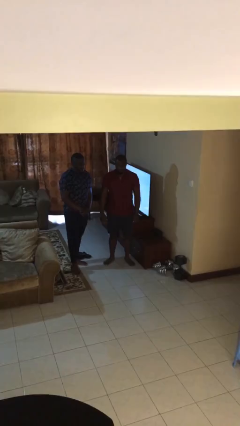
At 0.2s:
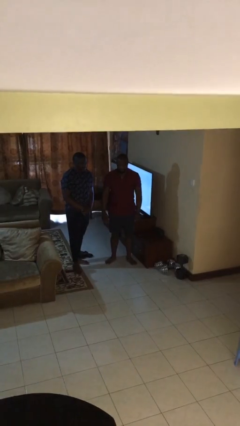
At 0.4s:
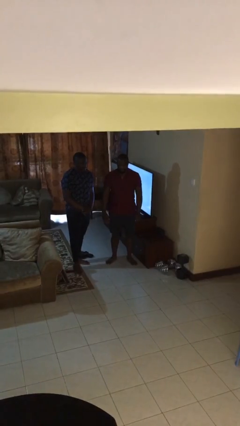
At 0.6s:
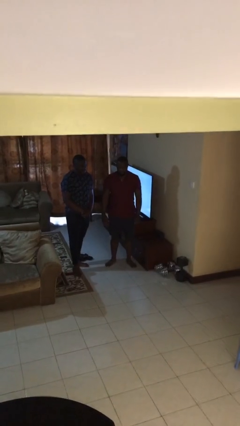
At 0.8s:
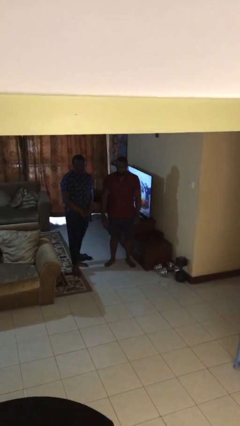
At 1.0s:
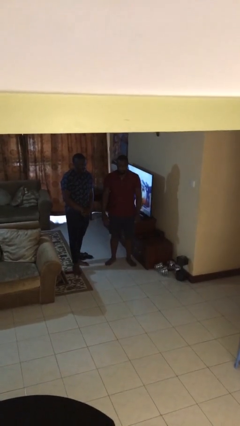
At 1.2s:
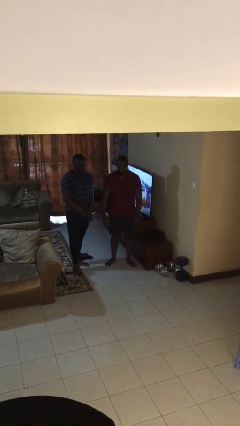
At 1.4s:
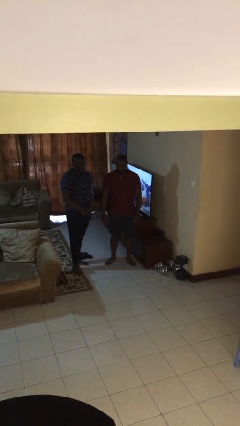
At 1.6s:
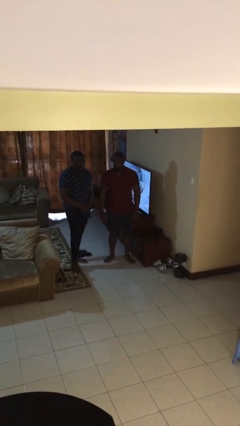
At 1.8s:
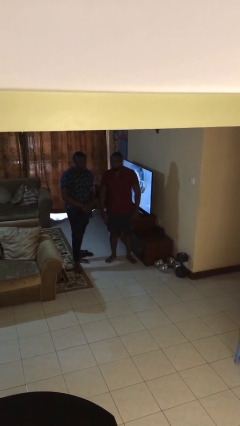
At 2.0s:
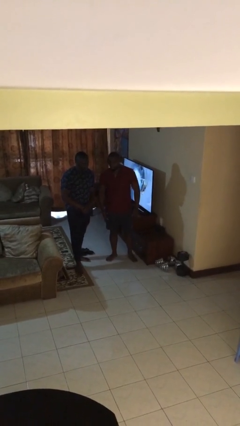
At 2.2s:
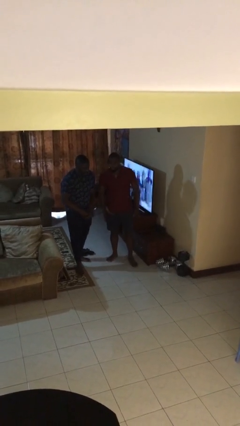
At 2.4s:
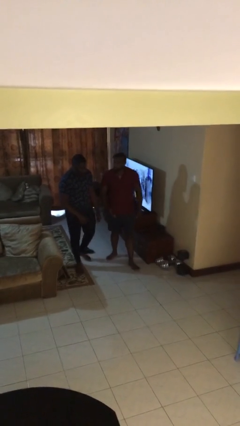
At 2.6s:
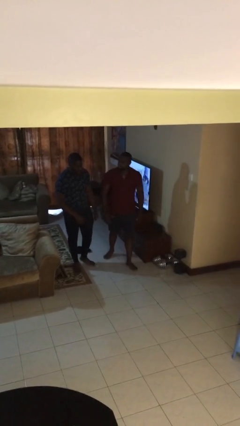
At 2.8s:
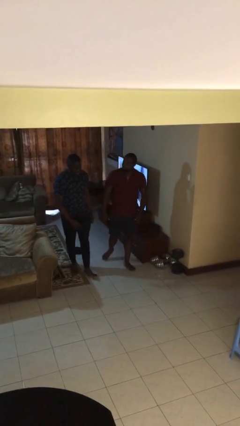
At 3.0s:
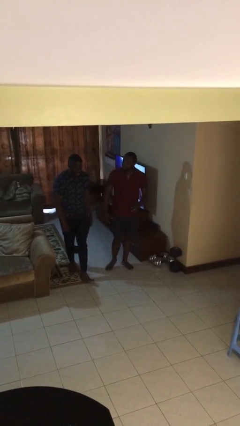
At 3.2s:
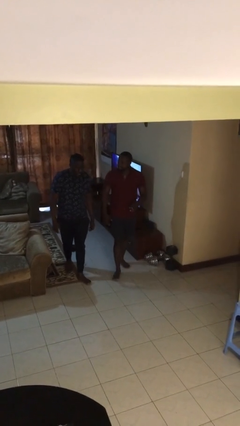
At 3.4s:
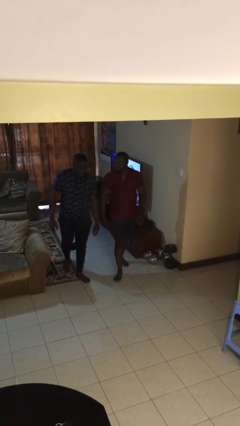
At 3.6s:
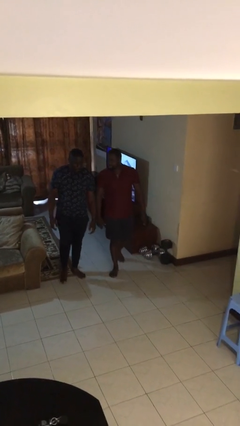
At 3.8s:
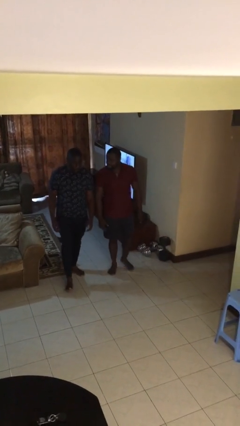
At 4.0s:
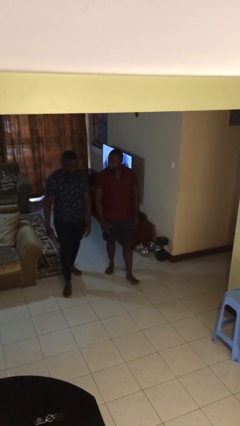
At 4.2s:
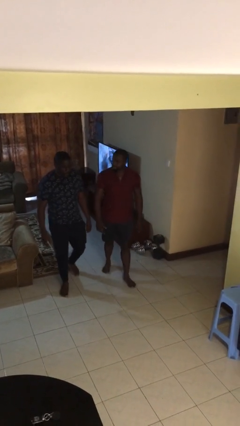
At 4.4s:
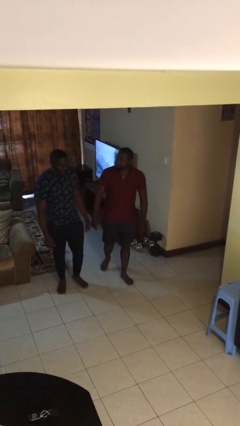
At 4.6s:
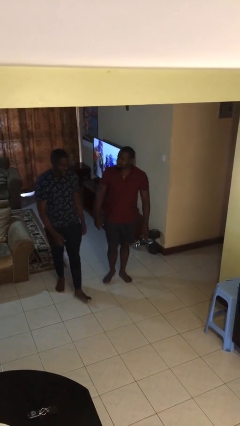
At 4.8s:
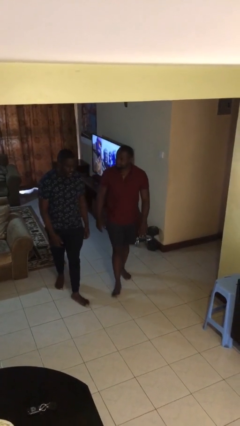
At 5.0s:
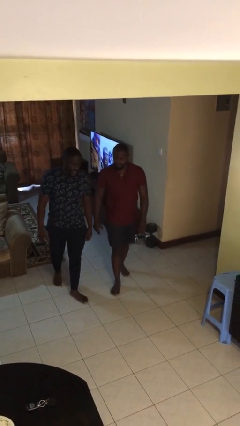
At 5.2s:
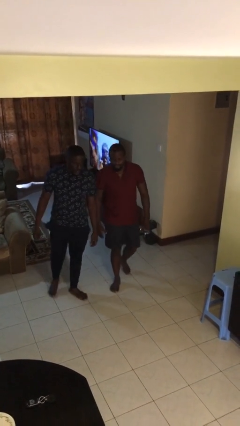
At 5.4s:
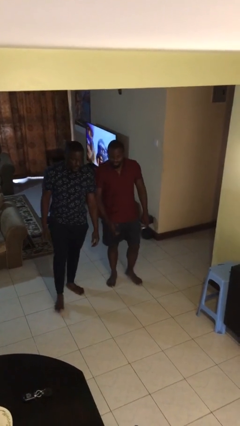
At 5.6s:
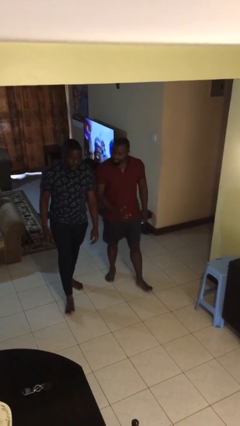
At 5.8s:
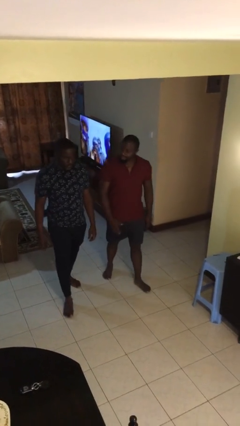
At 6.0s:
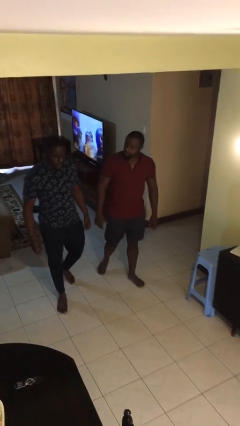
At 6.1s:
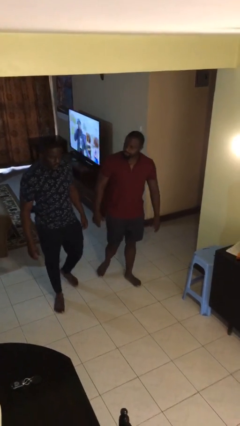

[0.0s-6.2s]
person talks to person

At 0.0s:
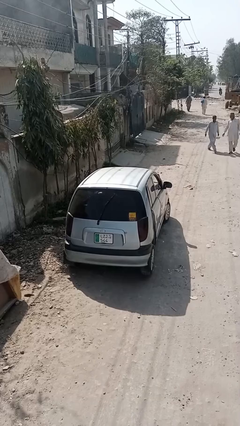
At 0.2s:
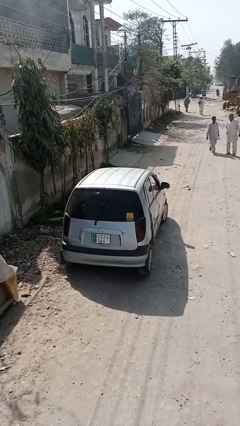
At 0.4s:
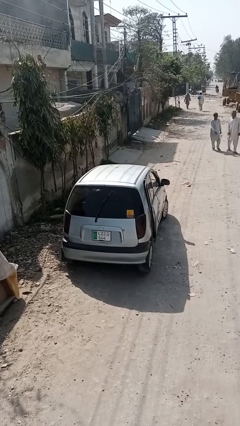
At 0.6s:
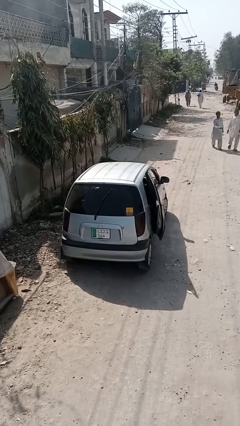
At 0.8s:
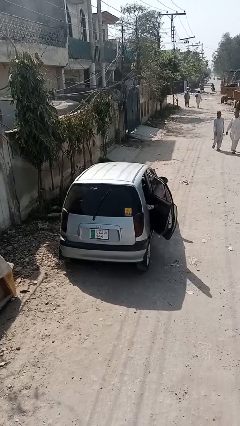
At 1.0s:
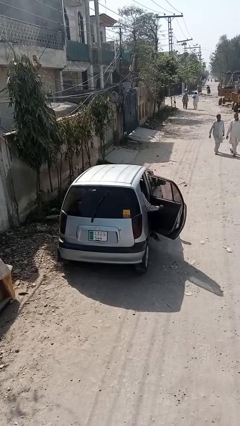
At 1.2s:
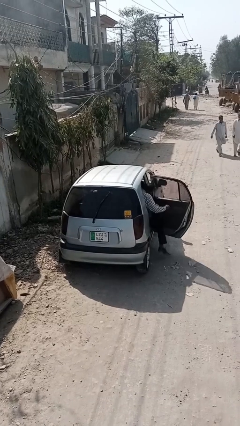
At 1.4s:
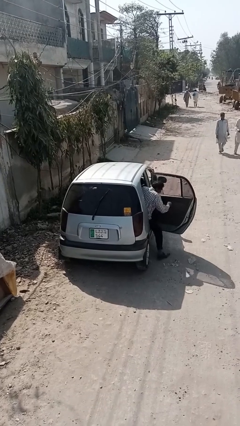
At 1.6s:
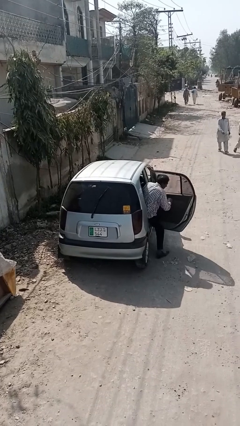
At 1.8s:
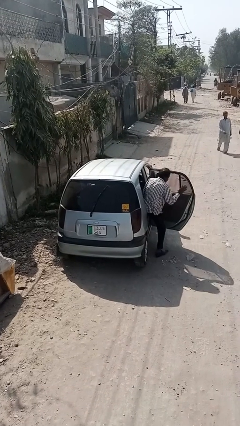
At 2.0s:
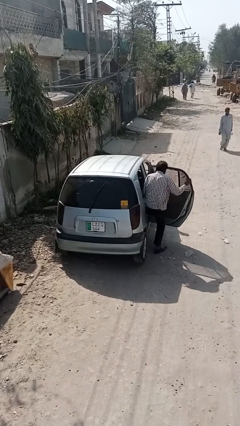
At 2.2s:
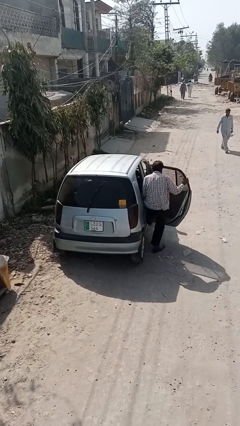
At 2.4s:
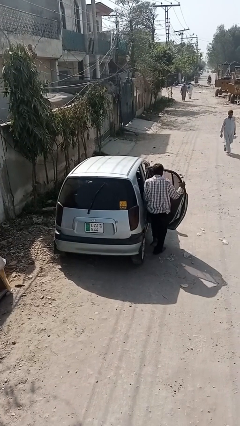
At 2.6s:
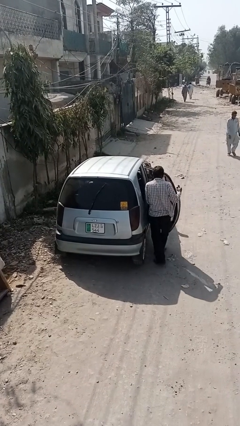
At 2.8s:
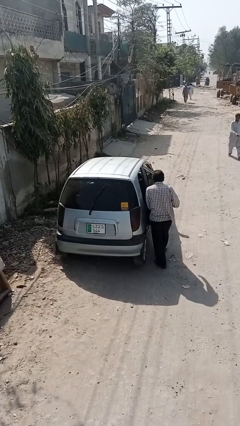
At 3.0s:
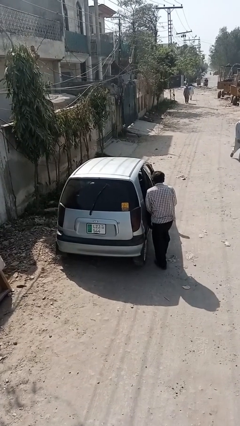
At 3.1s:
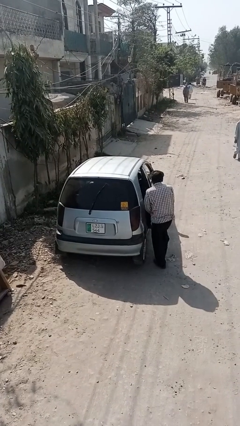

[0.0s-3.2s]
car drops off person

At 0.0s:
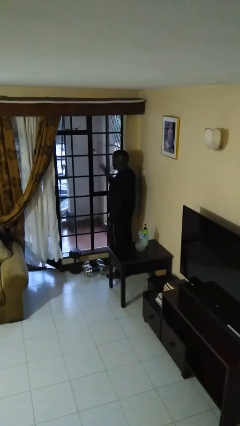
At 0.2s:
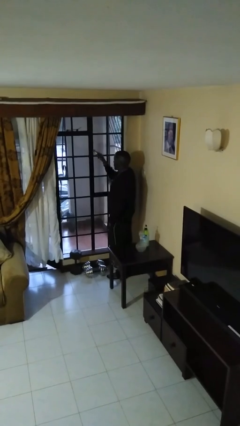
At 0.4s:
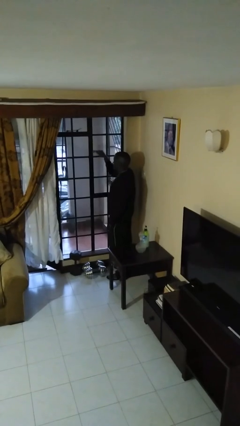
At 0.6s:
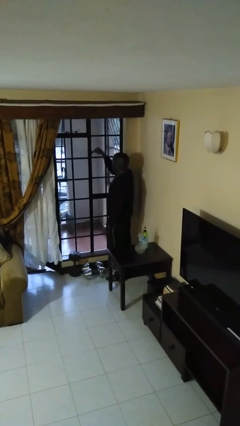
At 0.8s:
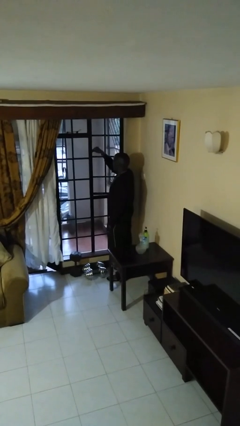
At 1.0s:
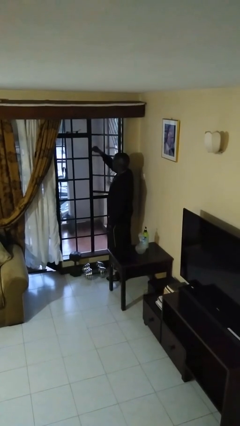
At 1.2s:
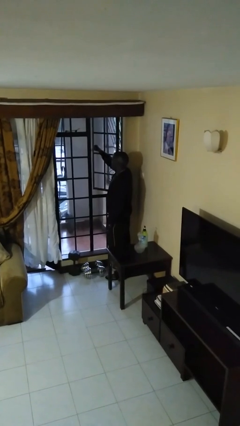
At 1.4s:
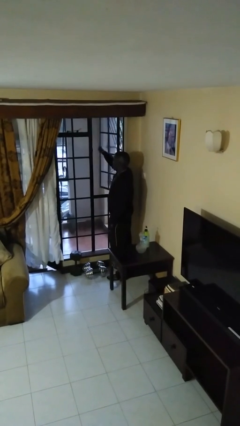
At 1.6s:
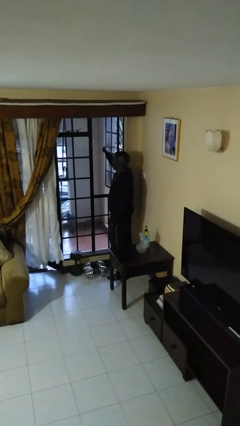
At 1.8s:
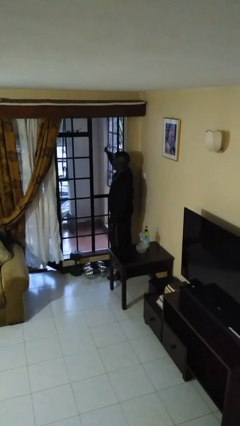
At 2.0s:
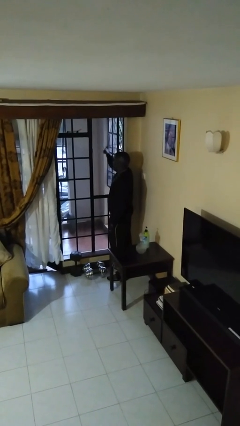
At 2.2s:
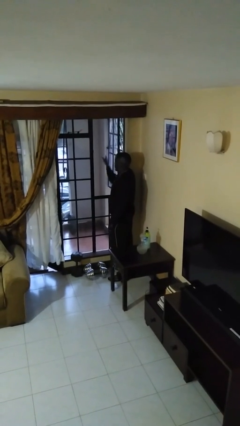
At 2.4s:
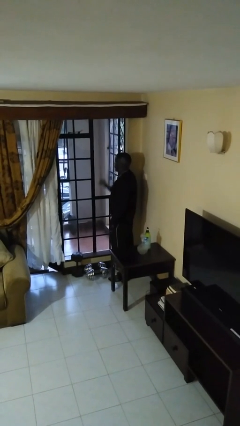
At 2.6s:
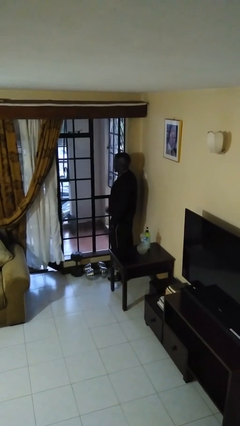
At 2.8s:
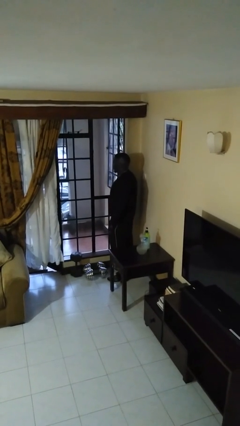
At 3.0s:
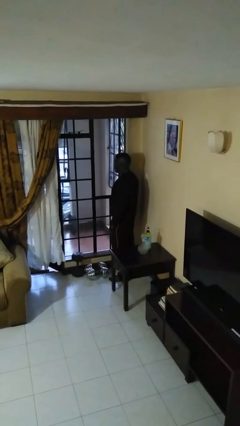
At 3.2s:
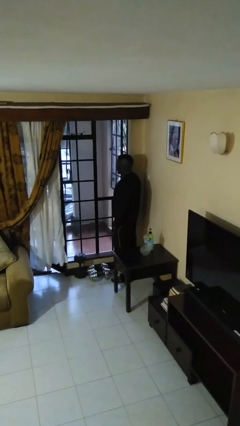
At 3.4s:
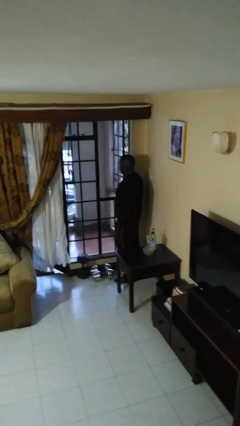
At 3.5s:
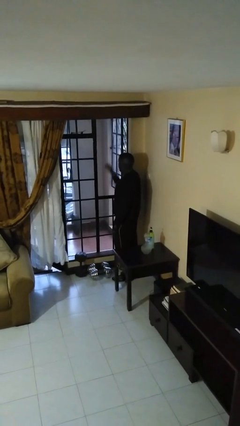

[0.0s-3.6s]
person opens home window

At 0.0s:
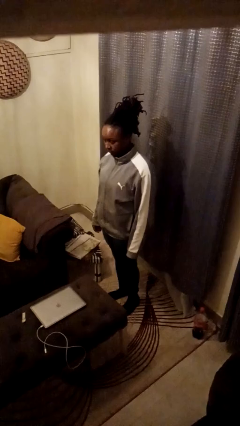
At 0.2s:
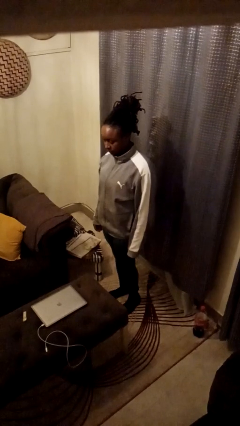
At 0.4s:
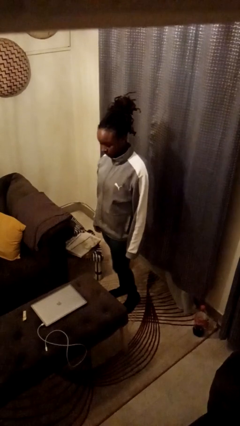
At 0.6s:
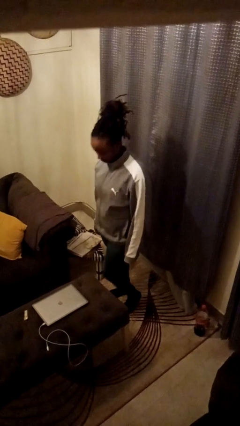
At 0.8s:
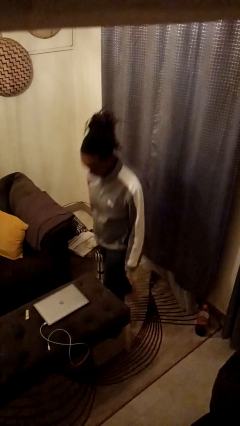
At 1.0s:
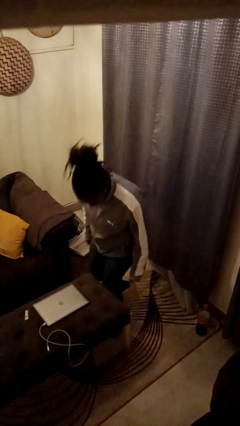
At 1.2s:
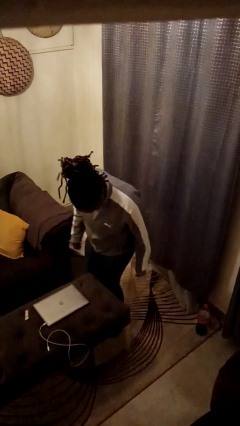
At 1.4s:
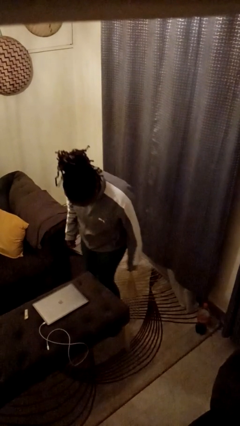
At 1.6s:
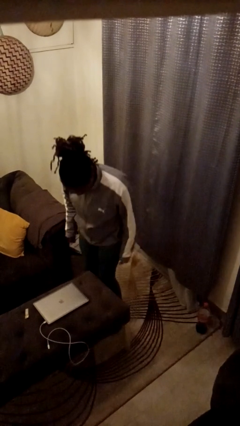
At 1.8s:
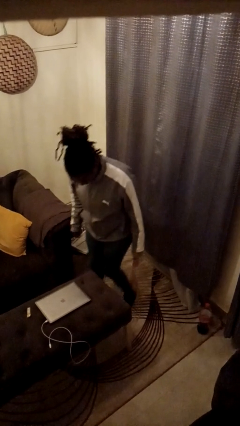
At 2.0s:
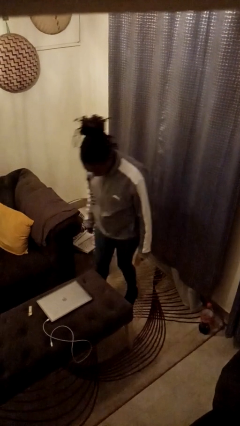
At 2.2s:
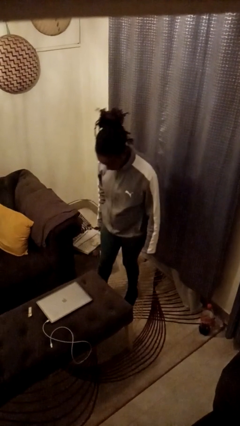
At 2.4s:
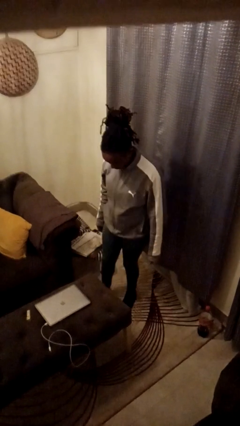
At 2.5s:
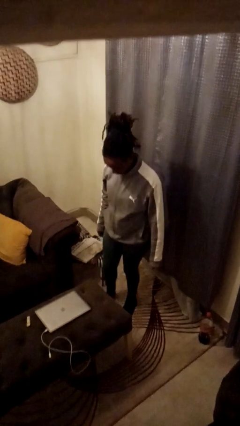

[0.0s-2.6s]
person bumps into table

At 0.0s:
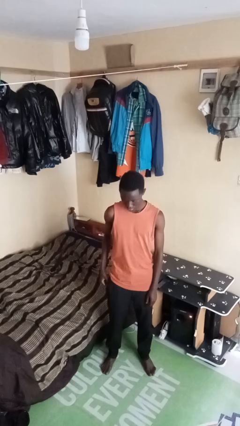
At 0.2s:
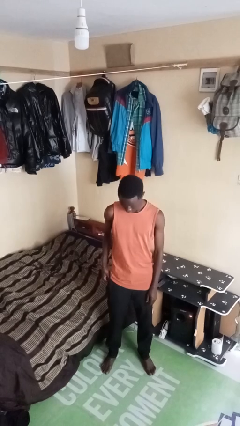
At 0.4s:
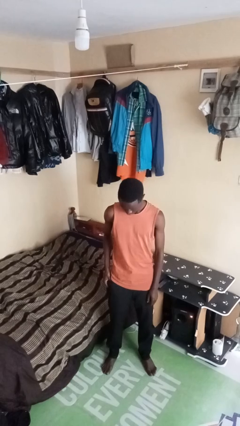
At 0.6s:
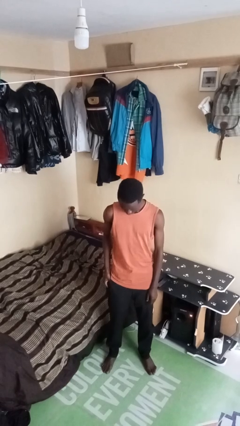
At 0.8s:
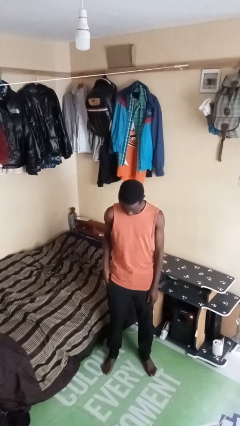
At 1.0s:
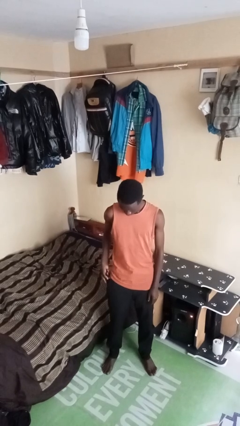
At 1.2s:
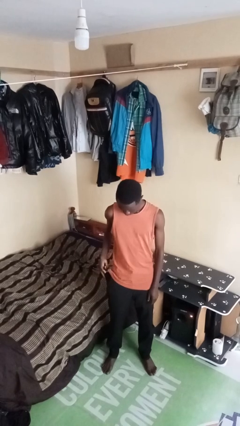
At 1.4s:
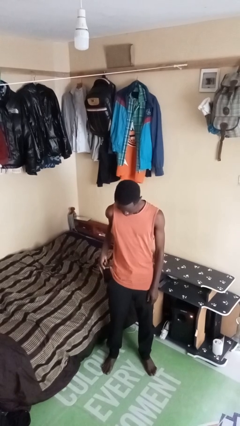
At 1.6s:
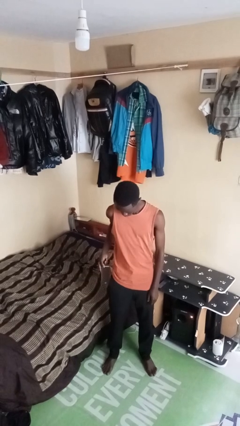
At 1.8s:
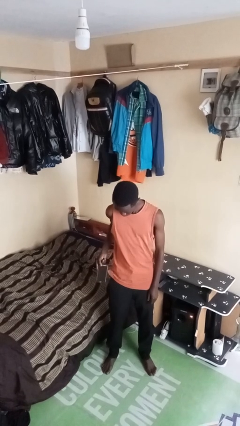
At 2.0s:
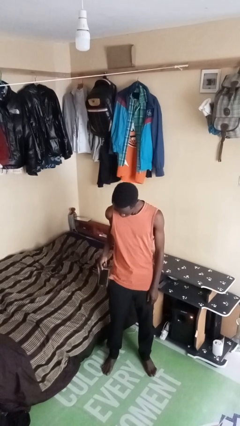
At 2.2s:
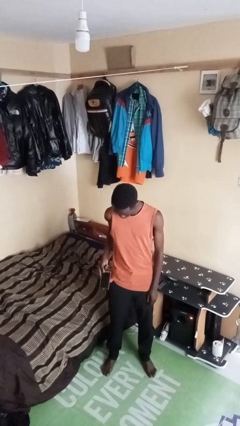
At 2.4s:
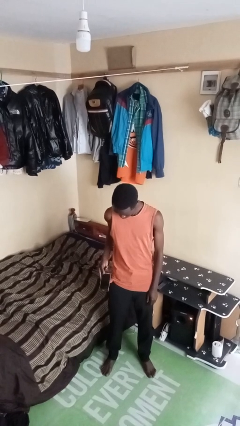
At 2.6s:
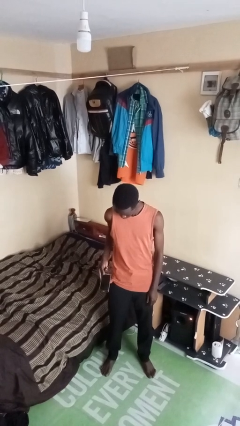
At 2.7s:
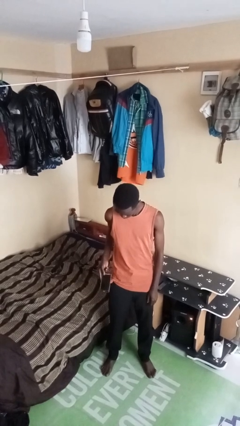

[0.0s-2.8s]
person takes phone from pocket
